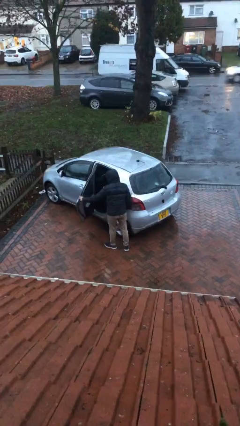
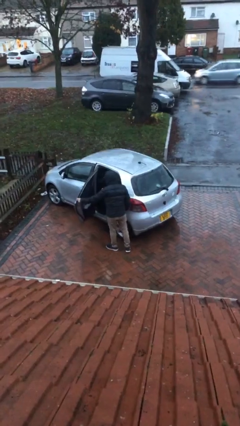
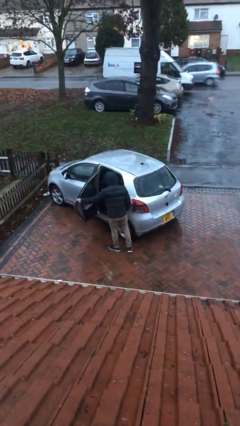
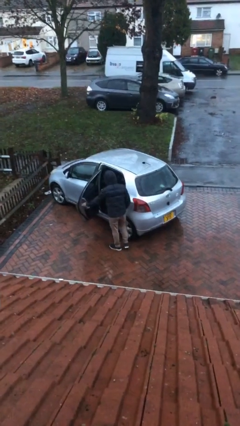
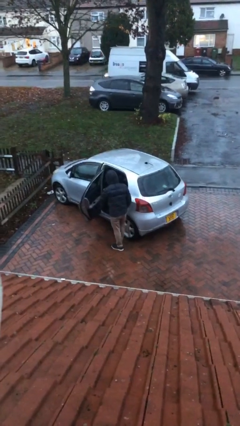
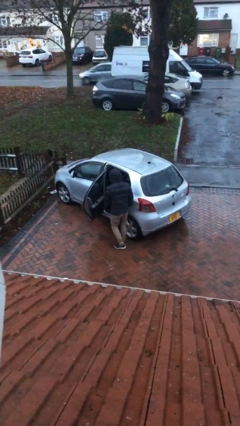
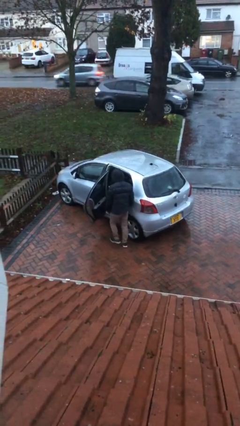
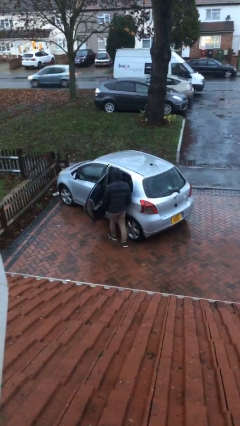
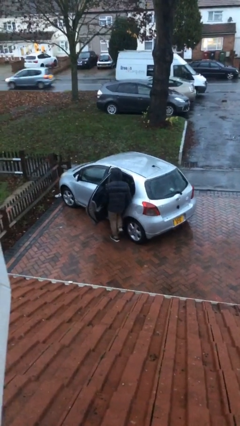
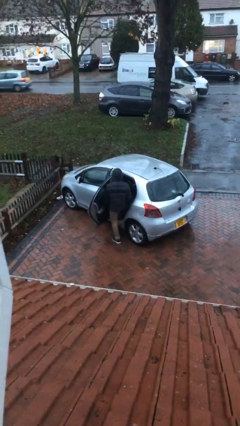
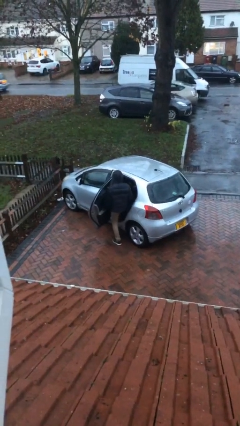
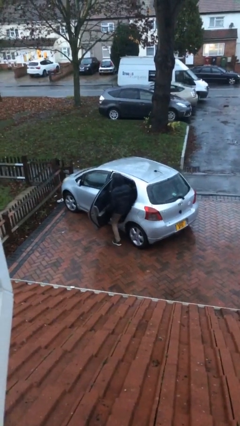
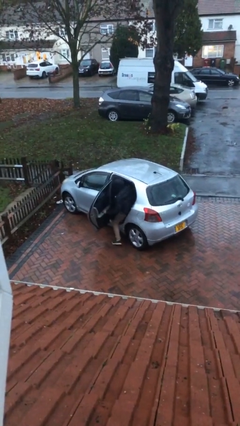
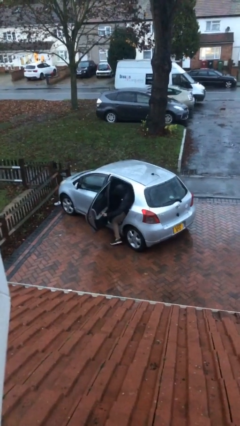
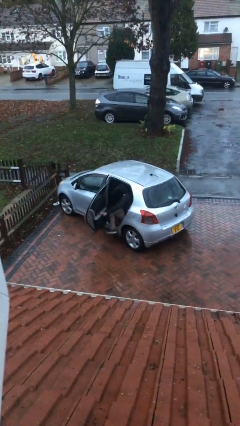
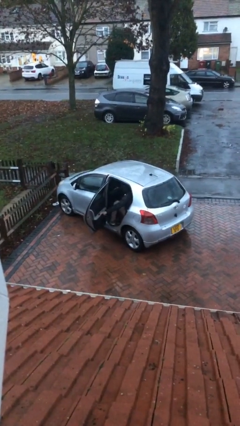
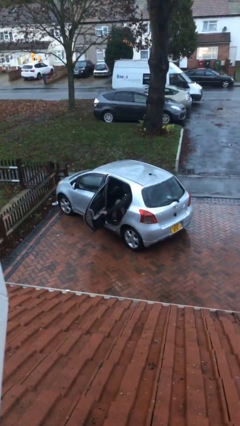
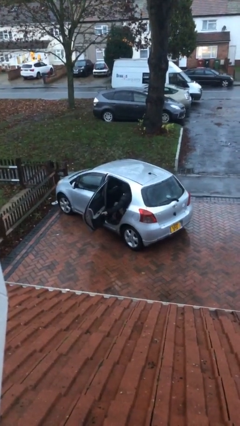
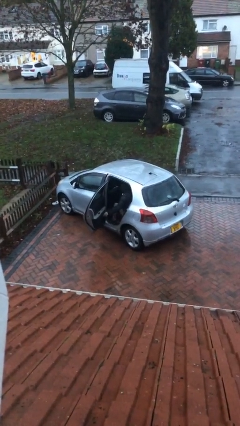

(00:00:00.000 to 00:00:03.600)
person enters car

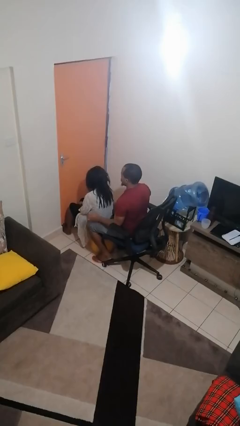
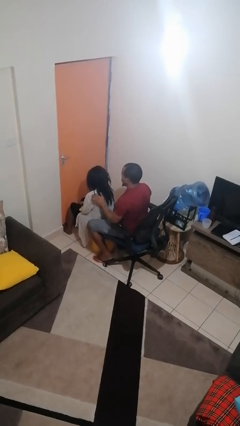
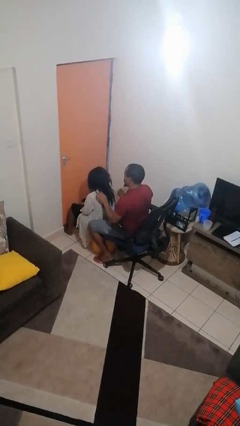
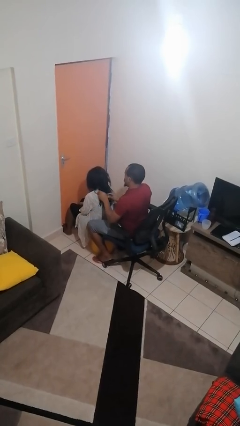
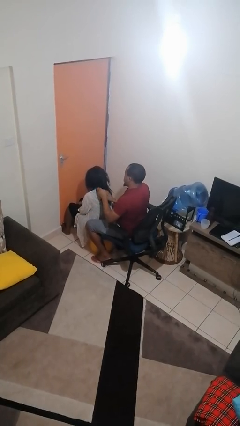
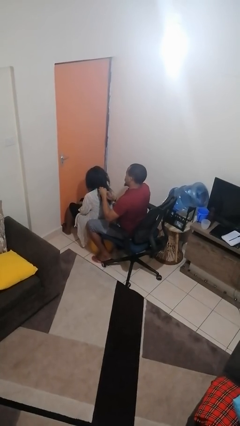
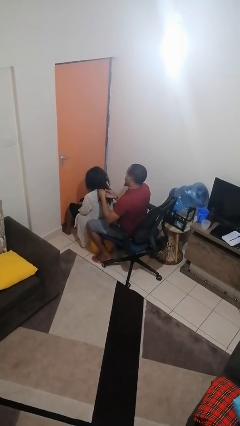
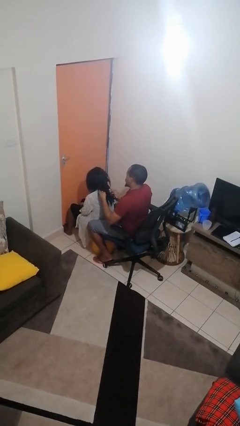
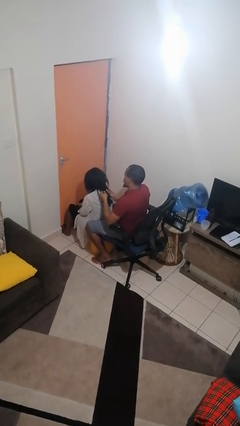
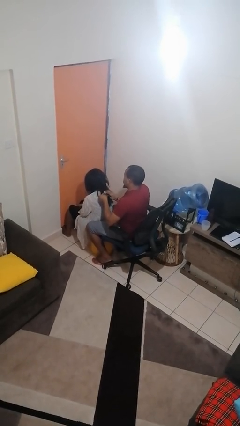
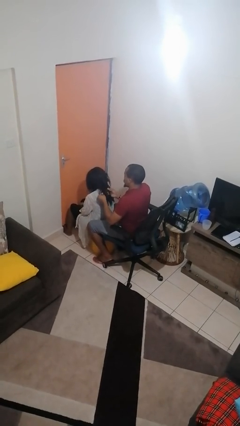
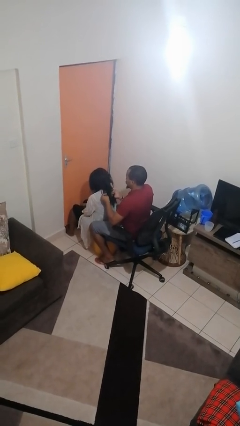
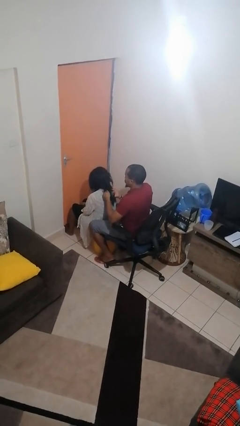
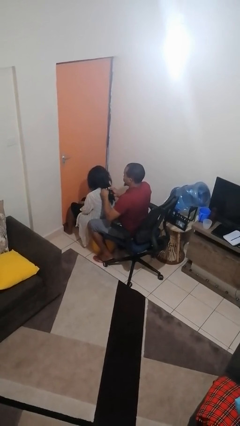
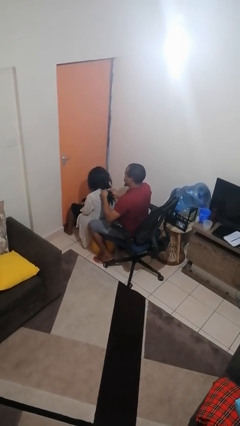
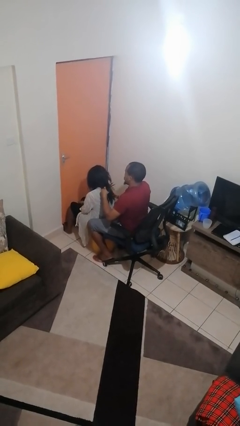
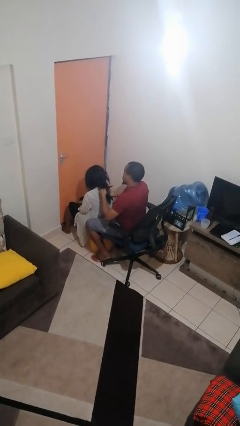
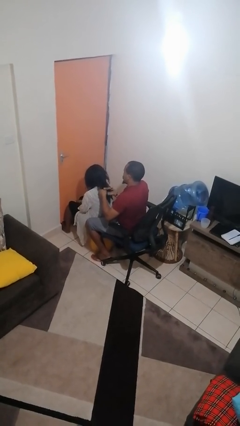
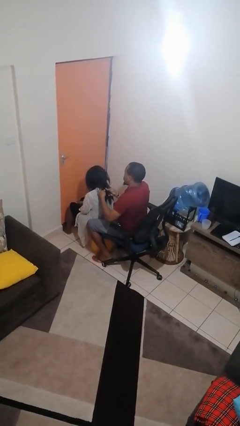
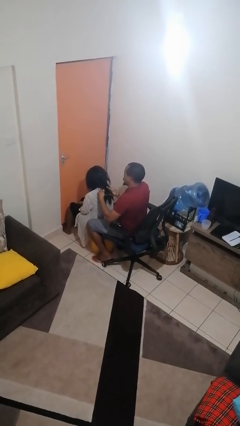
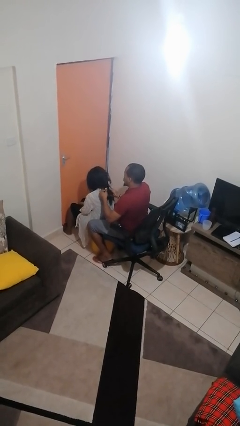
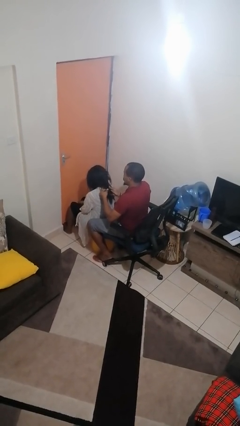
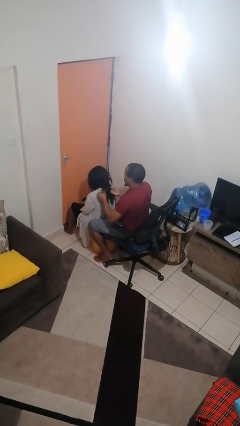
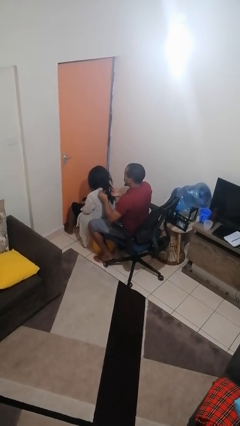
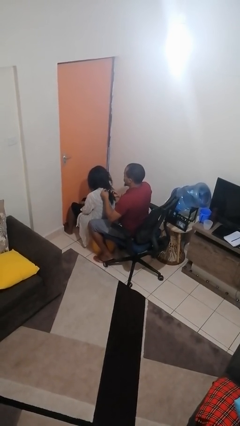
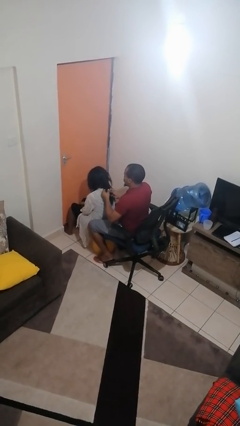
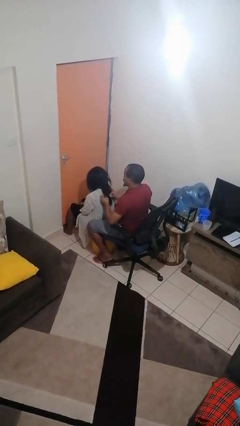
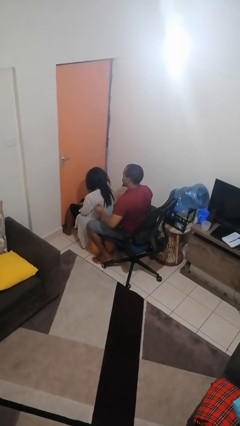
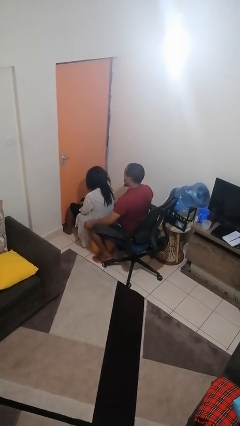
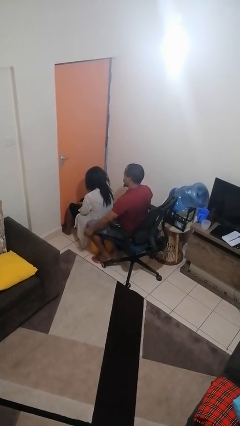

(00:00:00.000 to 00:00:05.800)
person braids hair of person

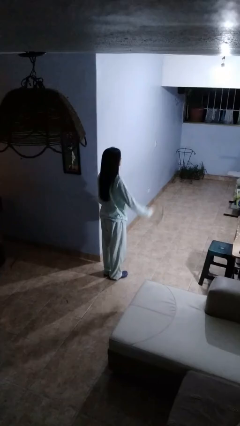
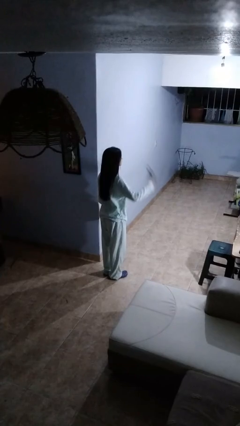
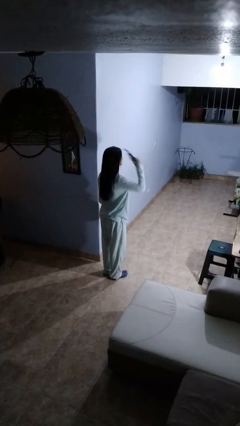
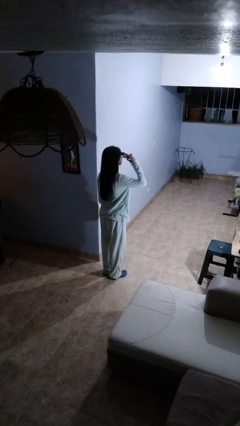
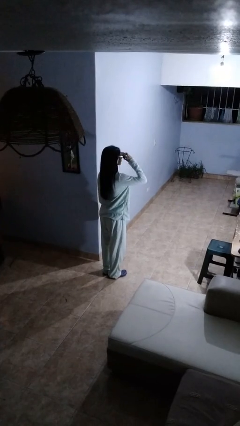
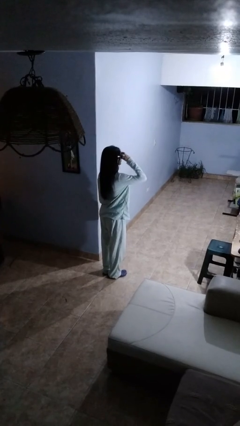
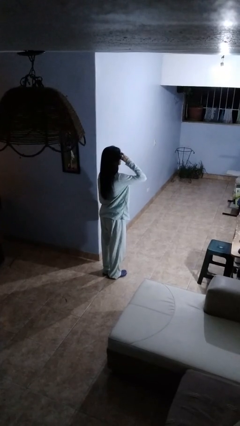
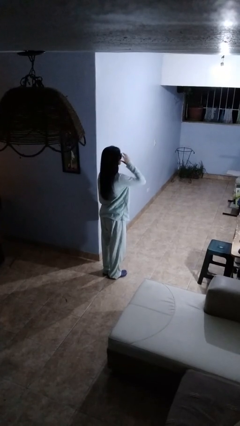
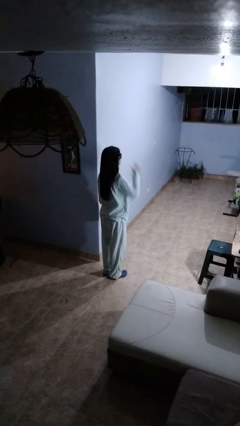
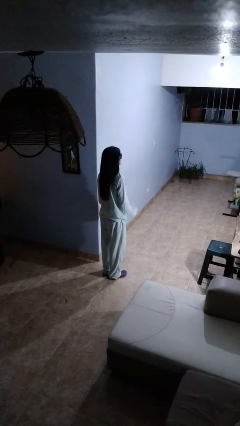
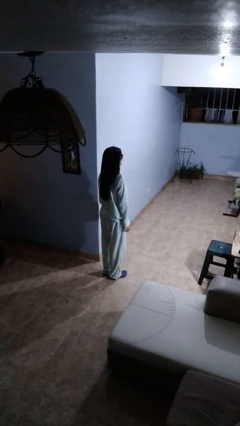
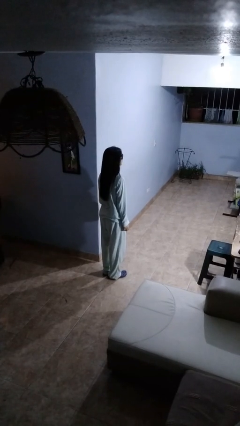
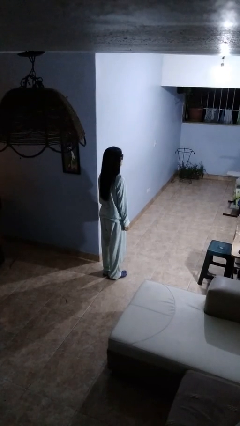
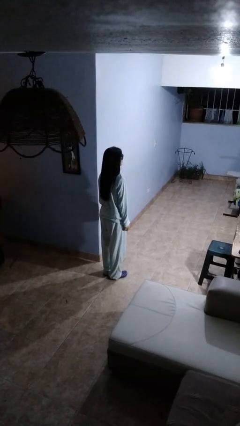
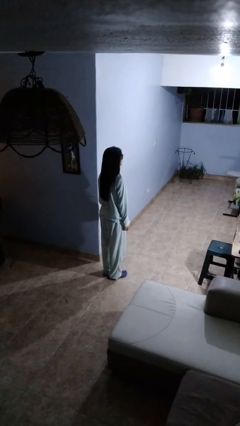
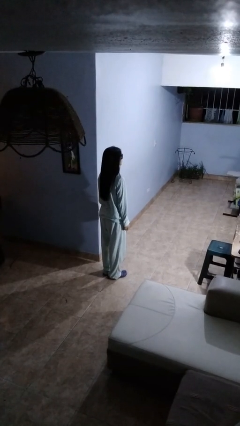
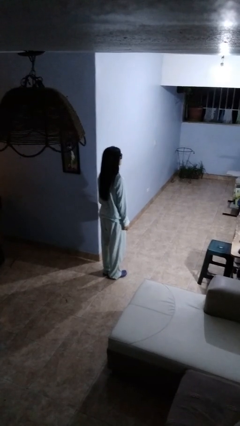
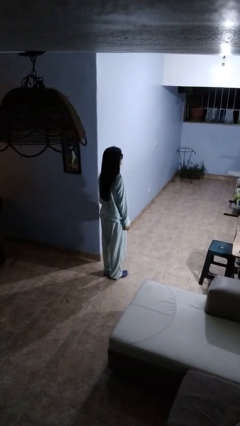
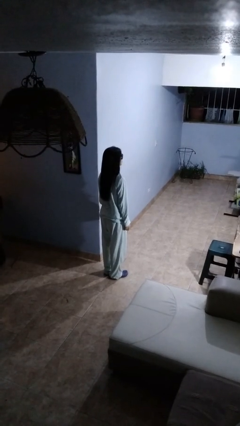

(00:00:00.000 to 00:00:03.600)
person puts on sunglasses

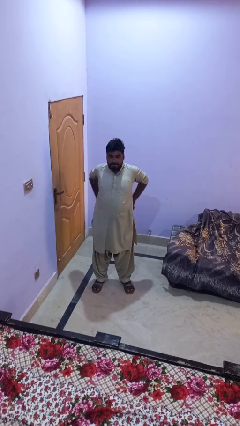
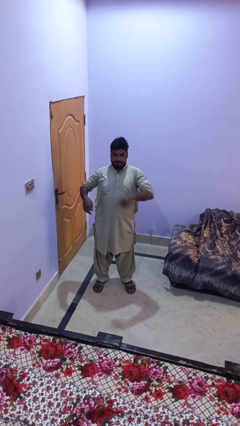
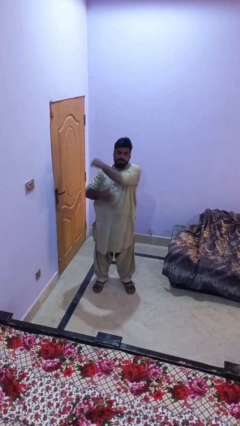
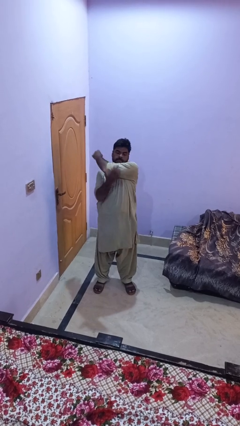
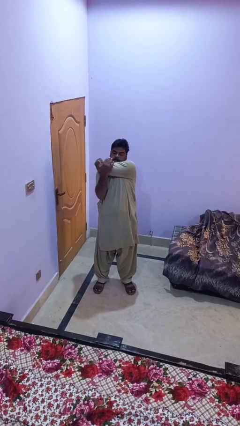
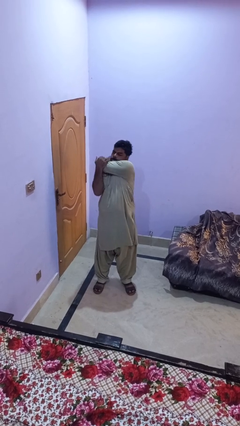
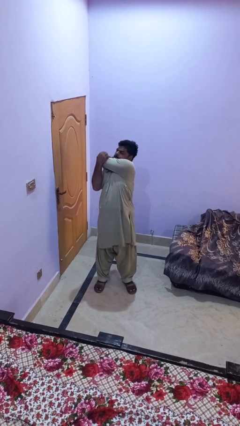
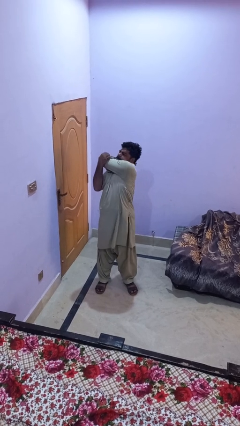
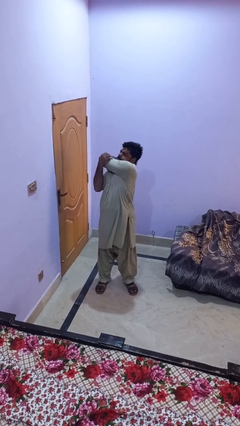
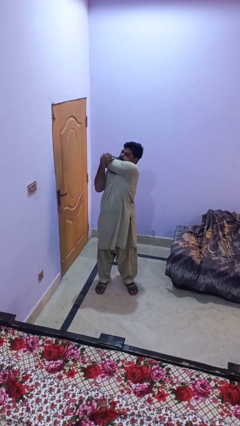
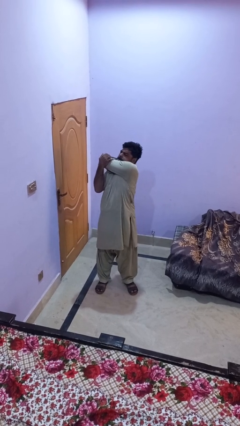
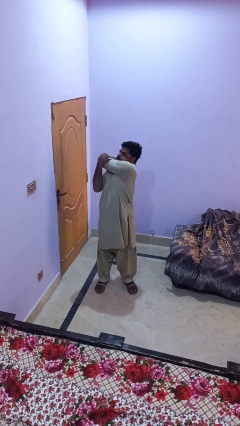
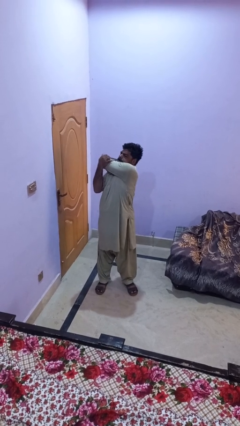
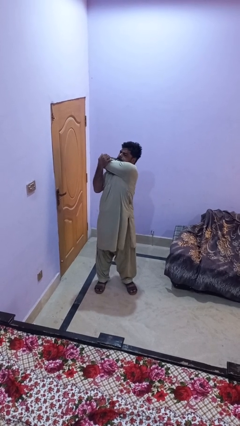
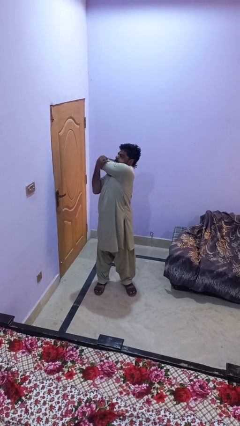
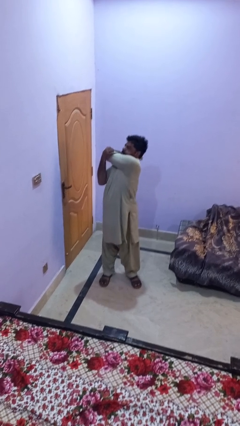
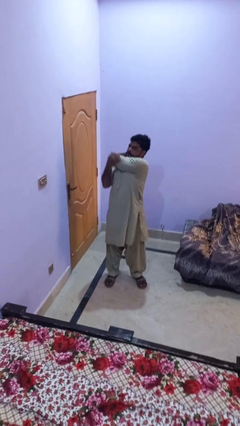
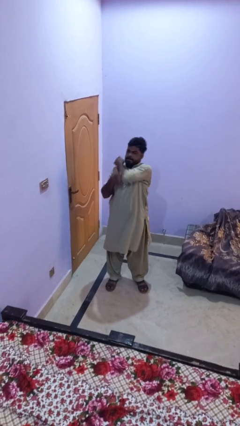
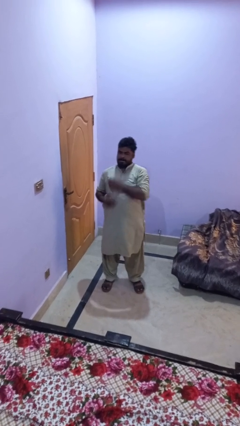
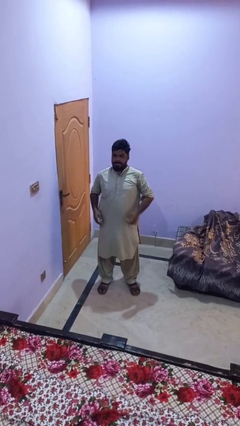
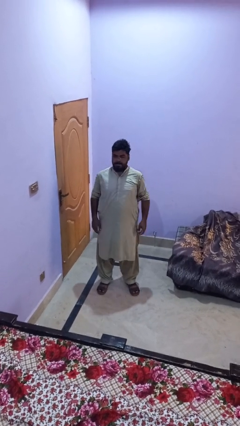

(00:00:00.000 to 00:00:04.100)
person stretches arms to side

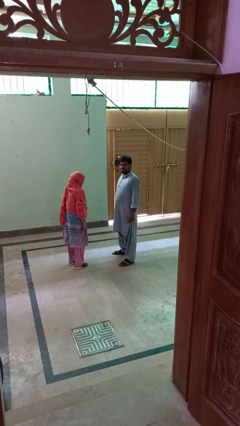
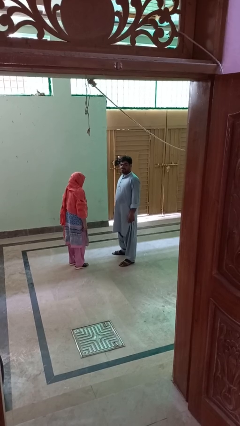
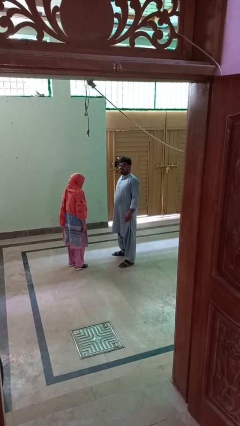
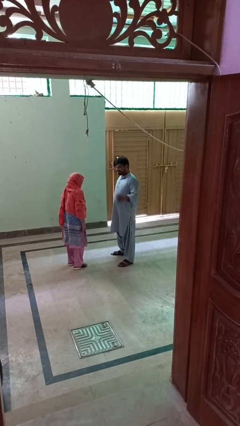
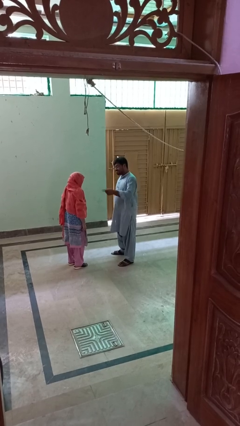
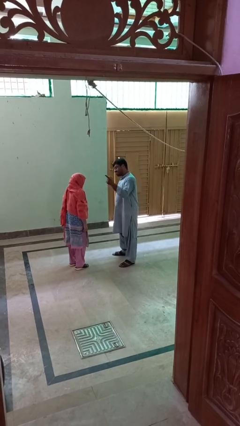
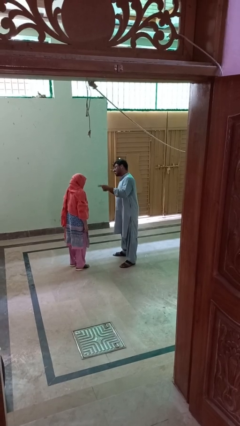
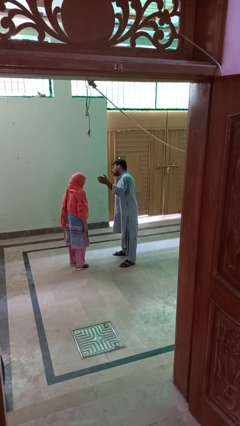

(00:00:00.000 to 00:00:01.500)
person shoves person
